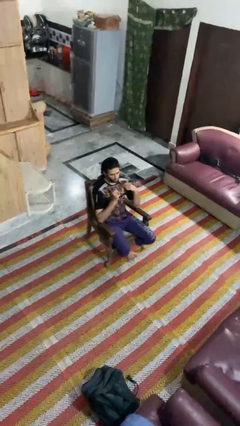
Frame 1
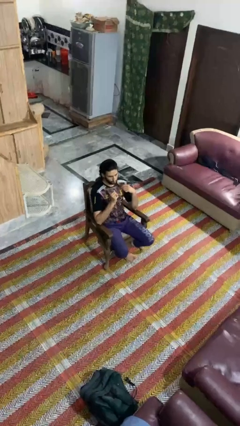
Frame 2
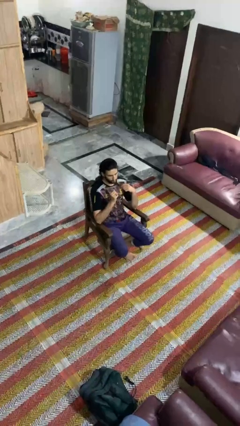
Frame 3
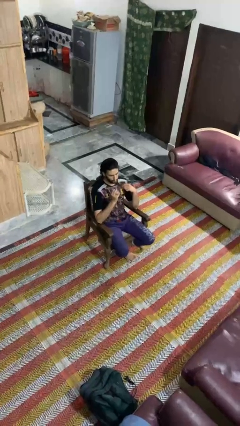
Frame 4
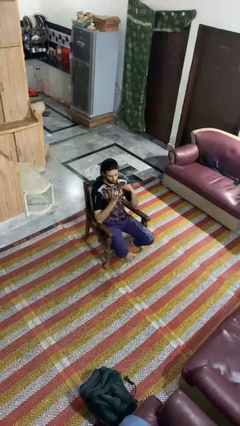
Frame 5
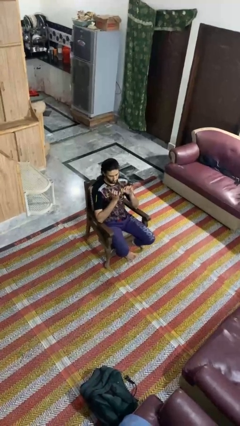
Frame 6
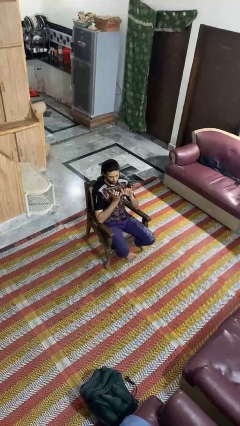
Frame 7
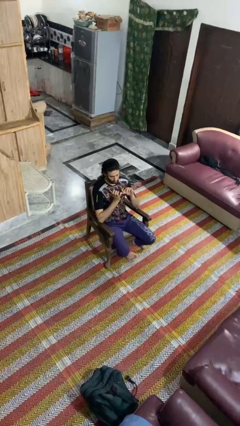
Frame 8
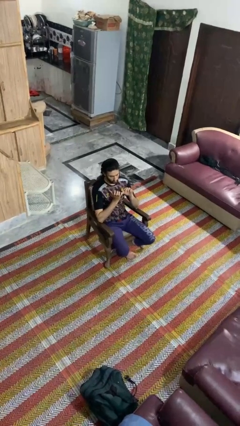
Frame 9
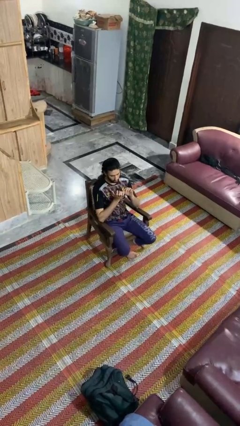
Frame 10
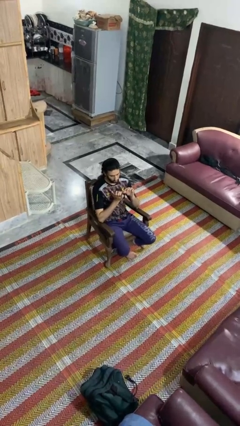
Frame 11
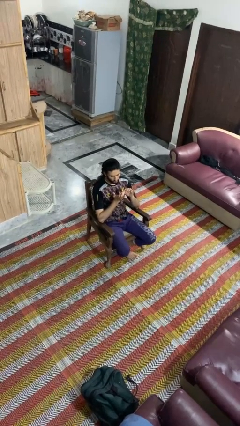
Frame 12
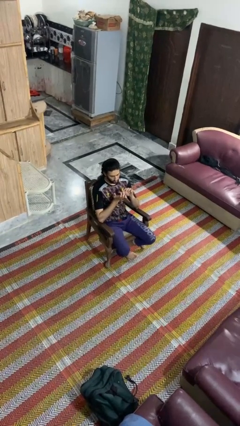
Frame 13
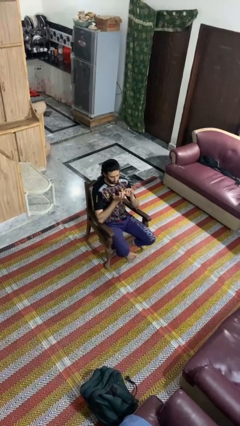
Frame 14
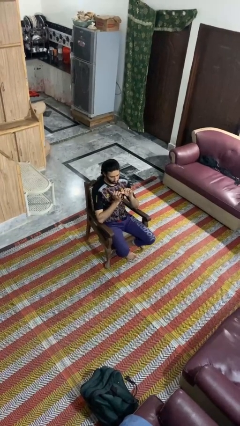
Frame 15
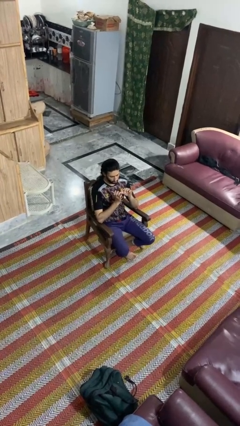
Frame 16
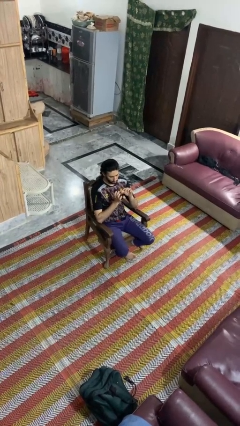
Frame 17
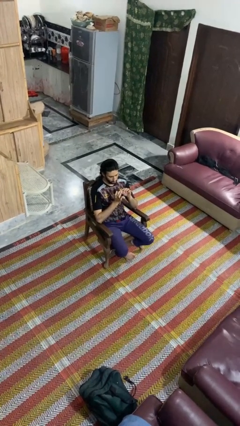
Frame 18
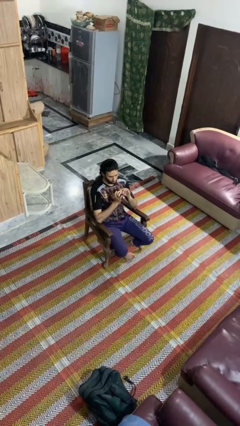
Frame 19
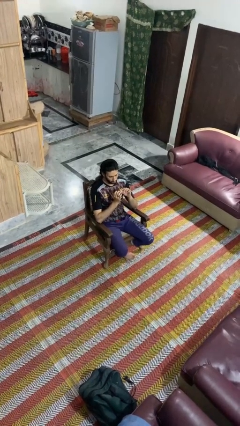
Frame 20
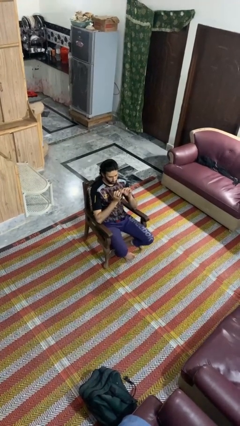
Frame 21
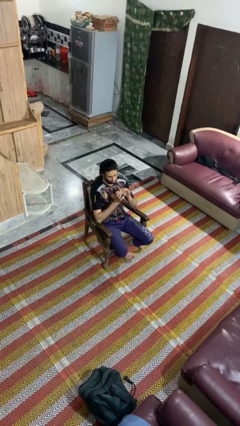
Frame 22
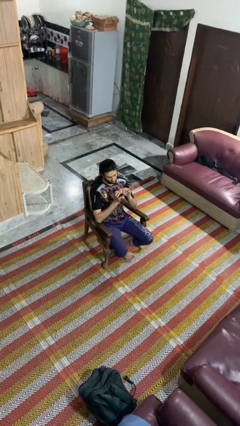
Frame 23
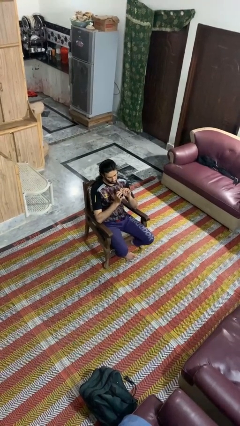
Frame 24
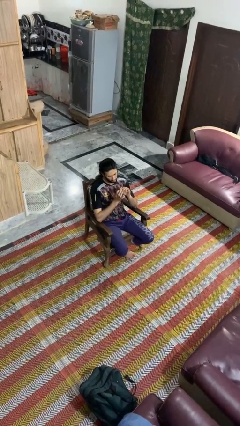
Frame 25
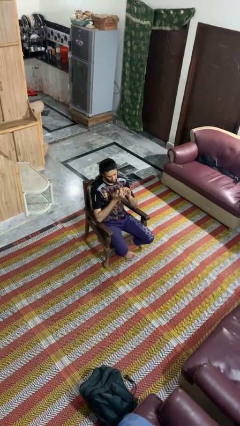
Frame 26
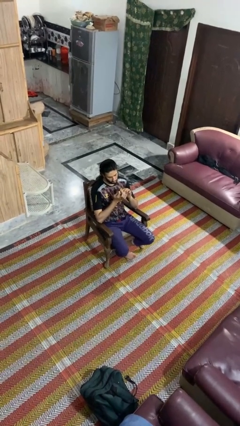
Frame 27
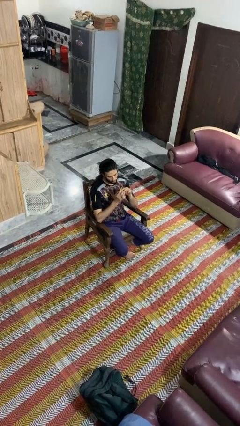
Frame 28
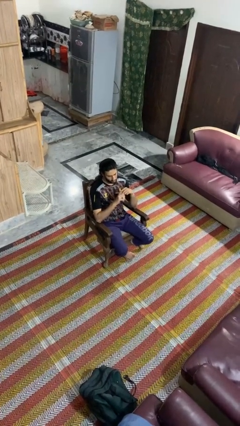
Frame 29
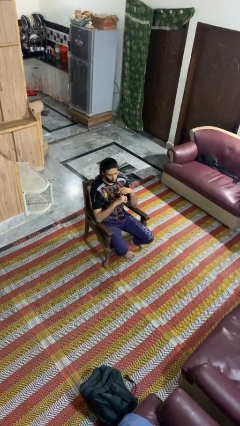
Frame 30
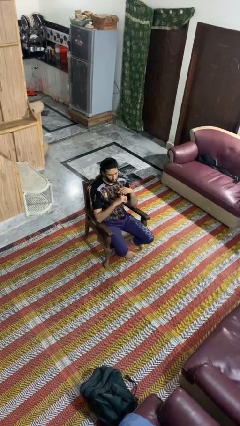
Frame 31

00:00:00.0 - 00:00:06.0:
person files fingernails

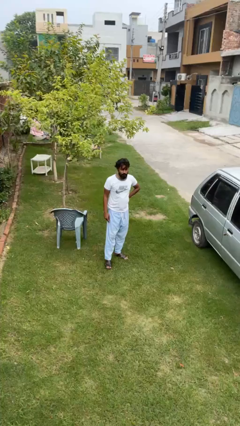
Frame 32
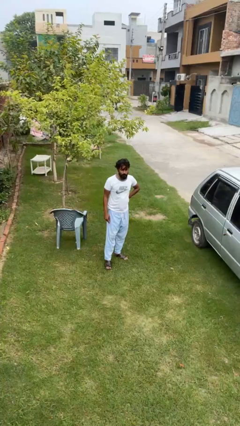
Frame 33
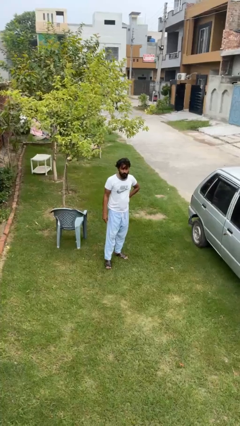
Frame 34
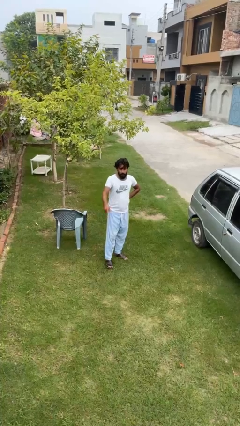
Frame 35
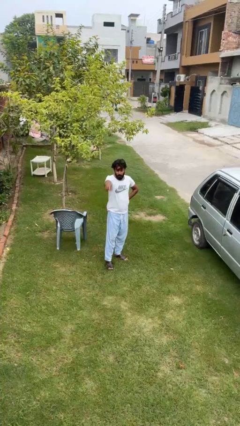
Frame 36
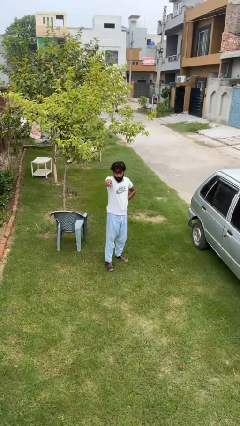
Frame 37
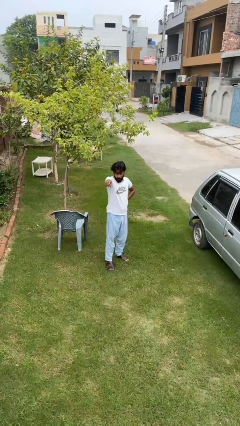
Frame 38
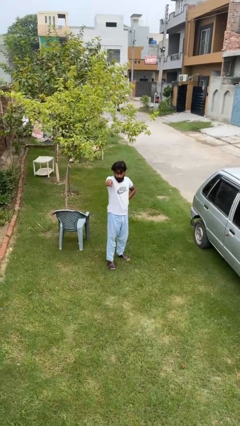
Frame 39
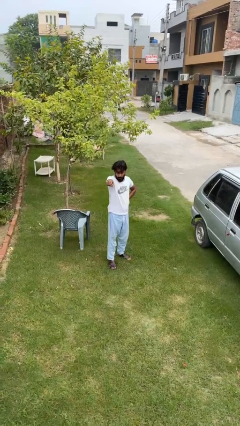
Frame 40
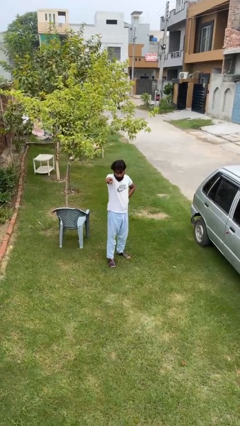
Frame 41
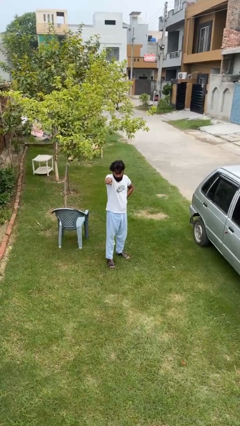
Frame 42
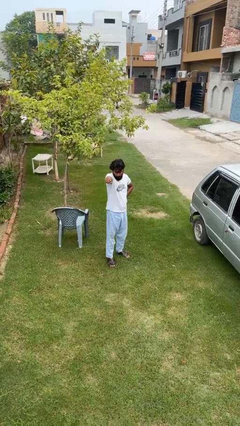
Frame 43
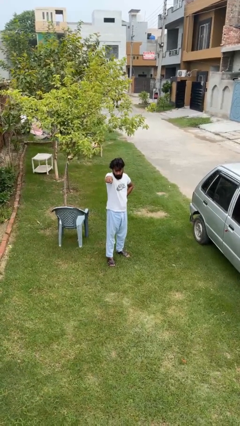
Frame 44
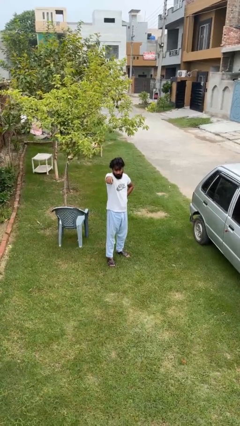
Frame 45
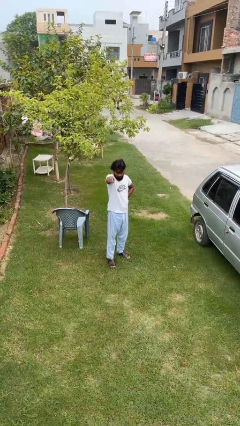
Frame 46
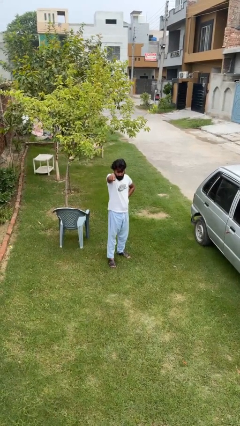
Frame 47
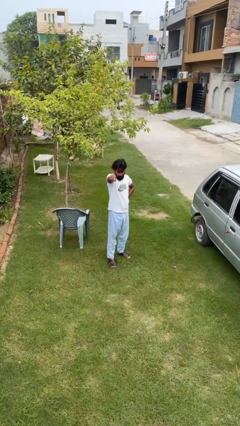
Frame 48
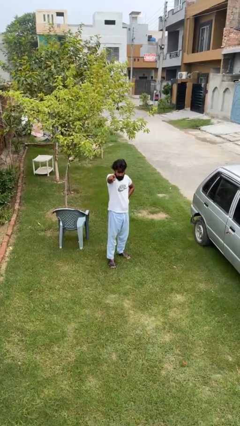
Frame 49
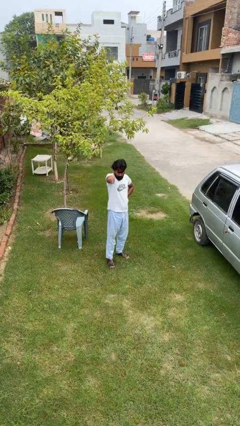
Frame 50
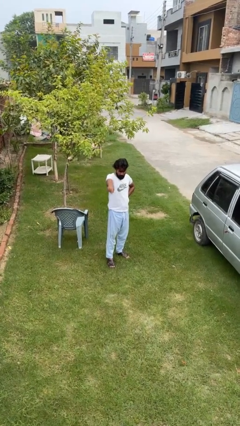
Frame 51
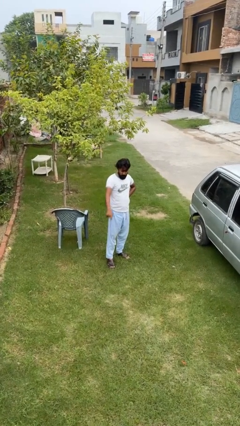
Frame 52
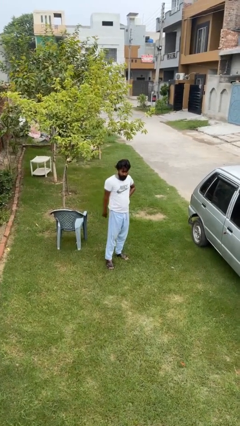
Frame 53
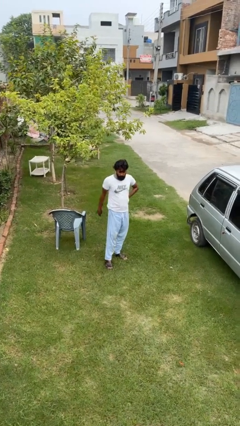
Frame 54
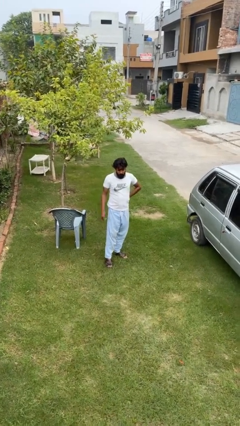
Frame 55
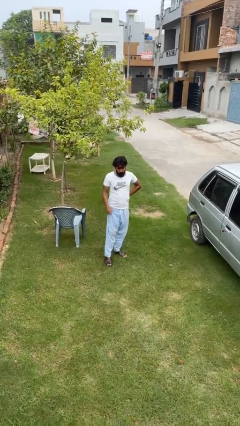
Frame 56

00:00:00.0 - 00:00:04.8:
person points at person

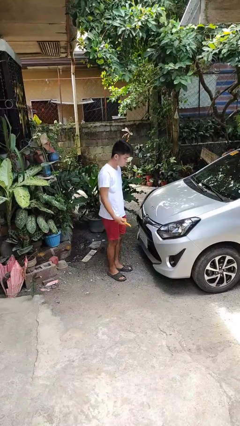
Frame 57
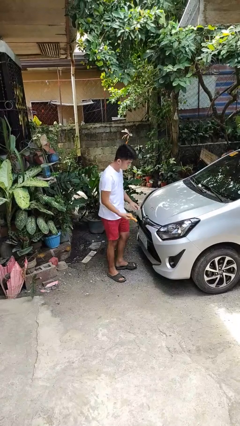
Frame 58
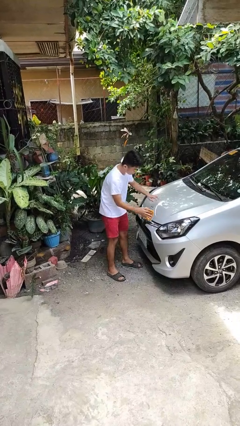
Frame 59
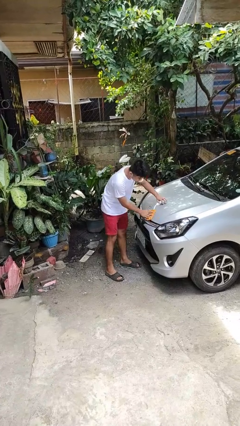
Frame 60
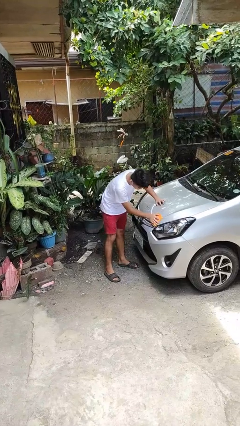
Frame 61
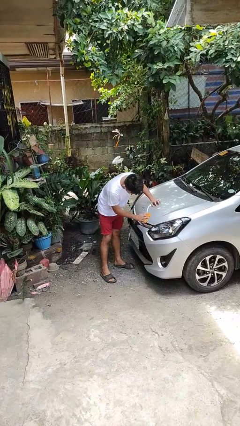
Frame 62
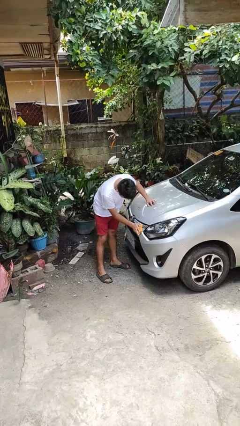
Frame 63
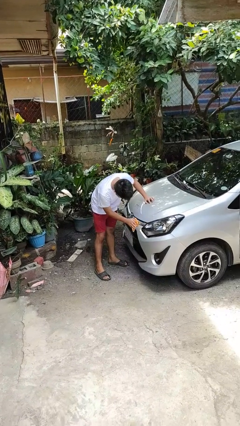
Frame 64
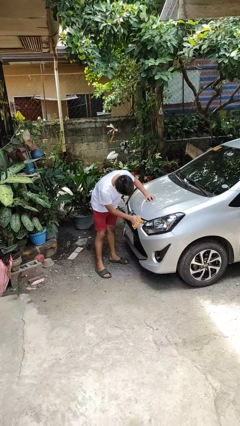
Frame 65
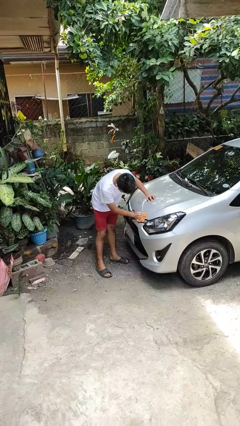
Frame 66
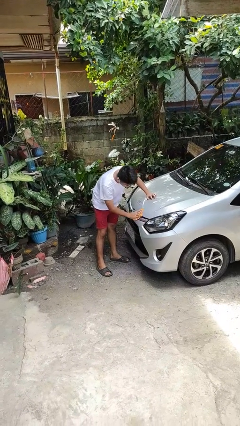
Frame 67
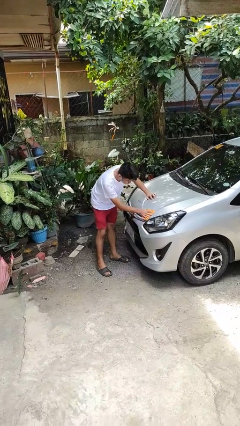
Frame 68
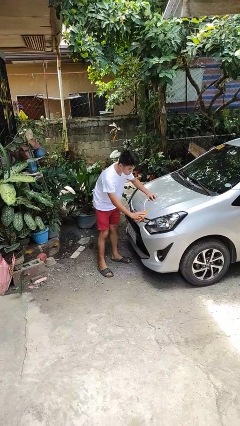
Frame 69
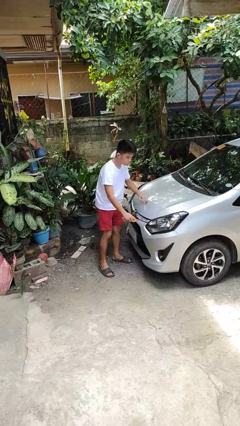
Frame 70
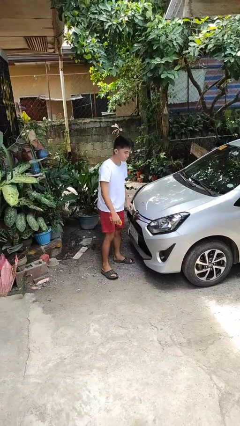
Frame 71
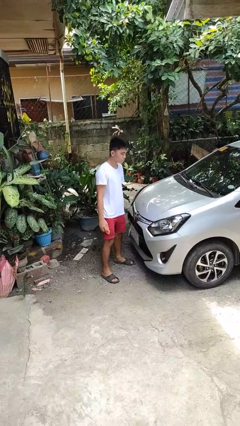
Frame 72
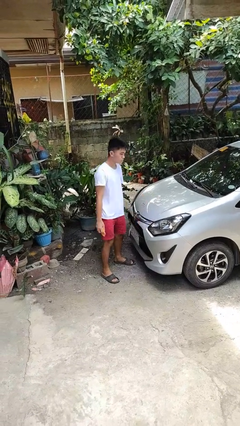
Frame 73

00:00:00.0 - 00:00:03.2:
person polishes car with rag

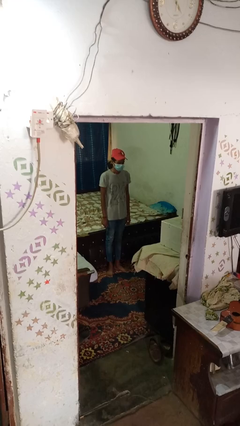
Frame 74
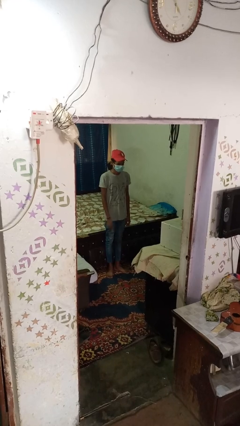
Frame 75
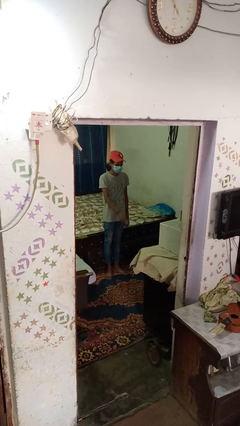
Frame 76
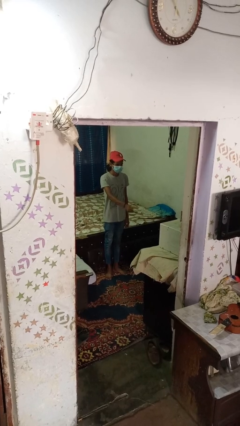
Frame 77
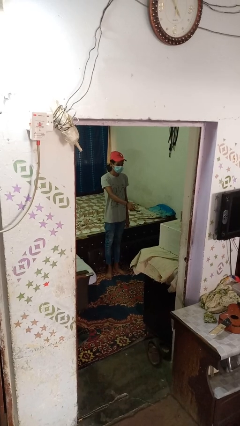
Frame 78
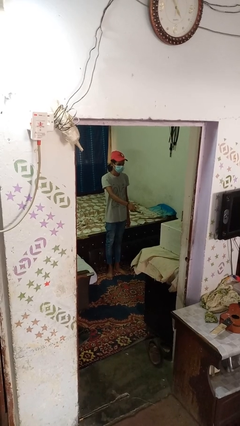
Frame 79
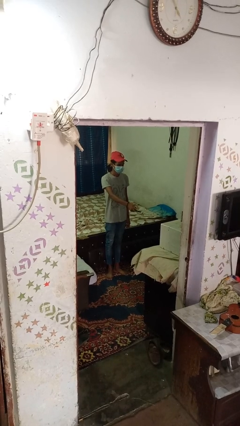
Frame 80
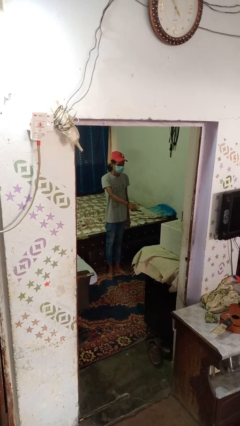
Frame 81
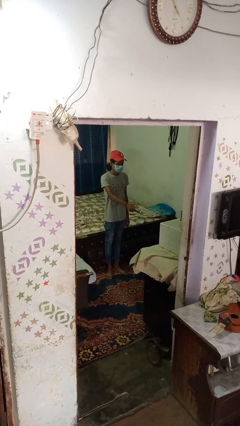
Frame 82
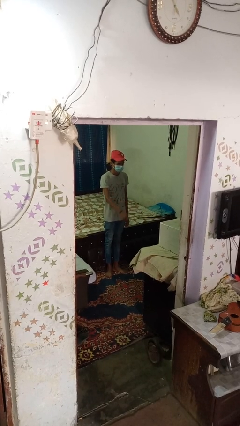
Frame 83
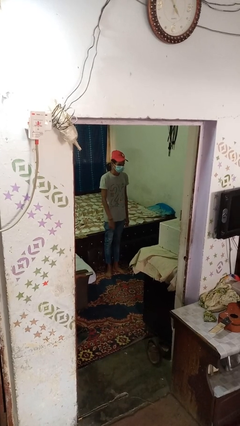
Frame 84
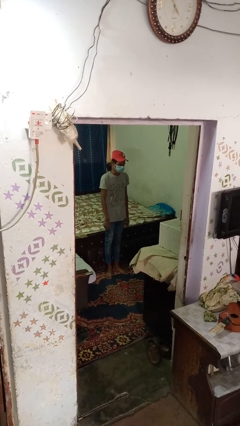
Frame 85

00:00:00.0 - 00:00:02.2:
person uses television remote

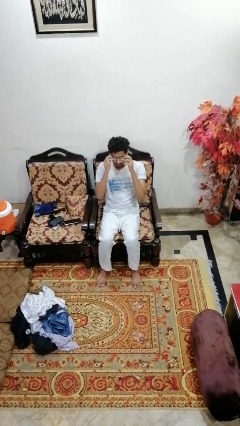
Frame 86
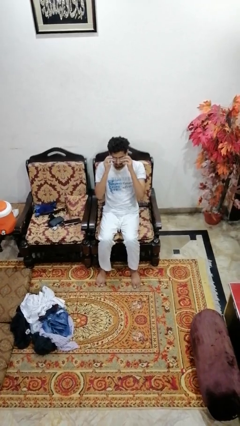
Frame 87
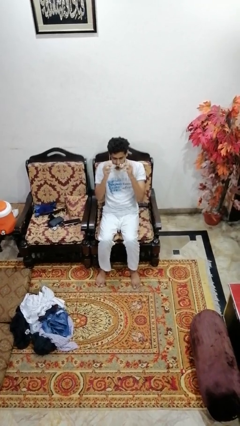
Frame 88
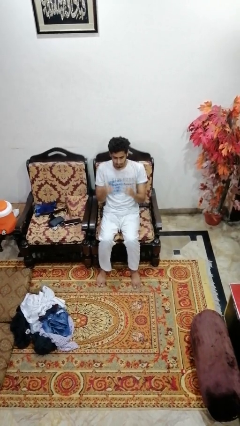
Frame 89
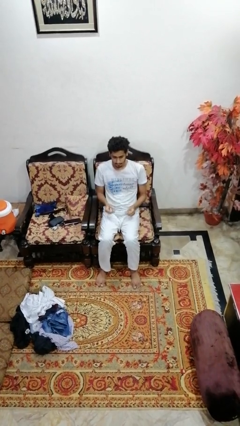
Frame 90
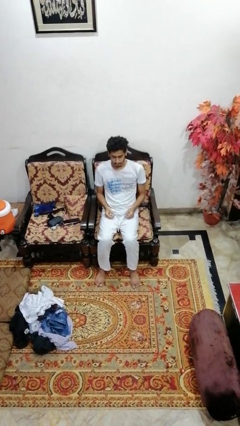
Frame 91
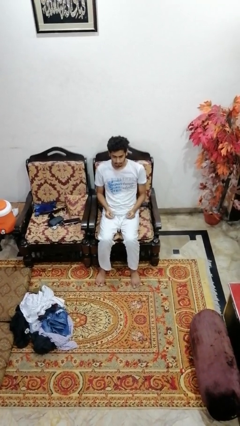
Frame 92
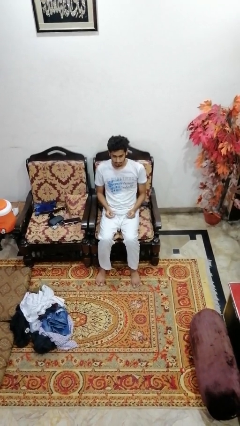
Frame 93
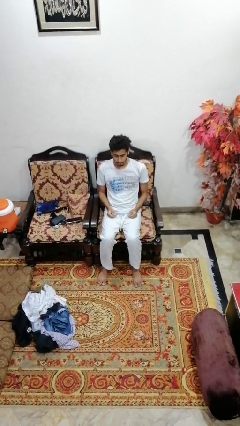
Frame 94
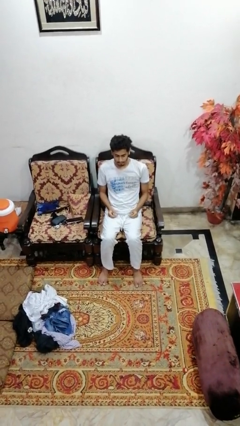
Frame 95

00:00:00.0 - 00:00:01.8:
person takes off glasses
